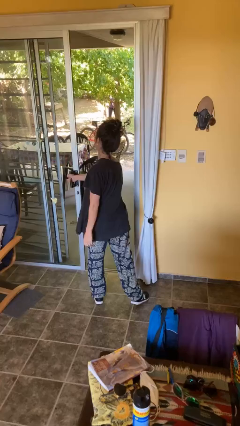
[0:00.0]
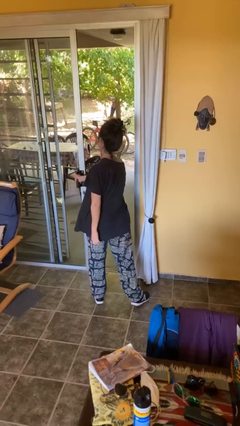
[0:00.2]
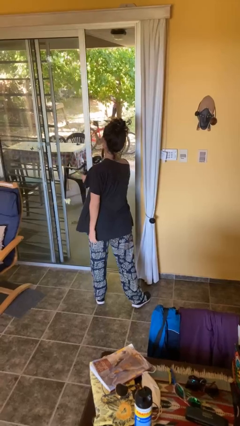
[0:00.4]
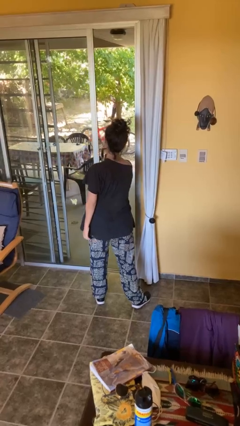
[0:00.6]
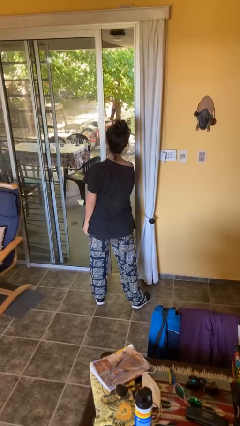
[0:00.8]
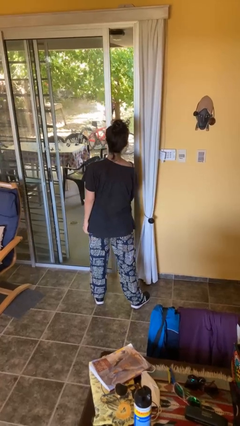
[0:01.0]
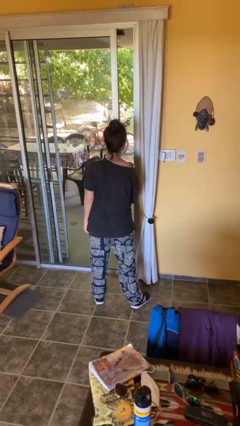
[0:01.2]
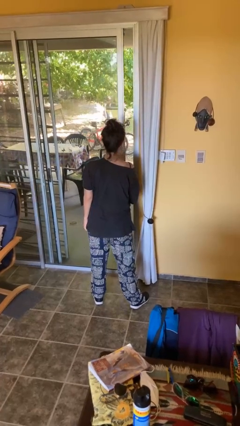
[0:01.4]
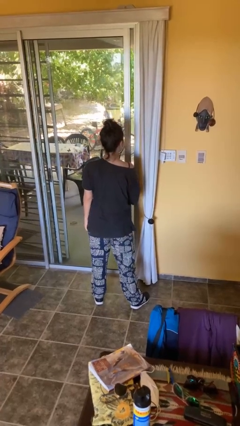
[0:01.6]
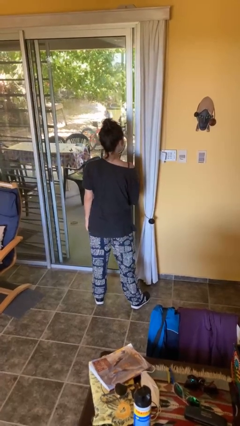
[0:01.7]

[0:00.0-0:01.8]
person closes facility door

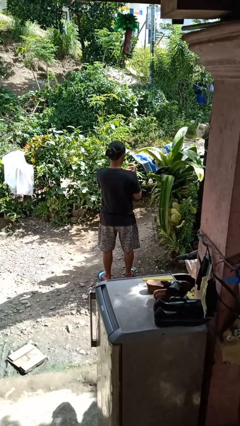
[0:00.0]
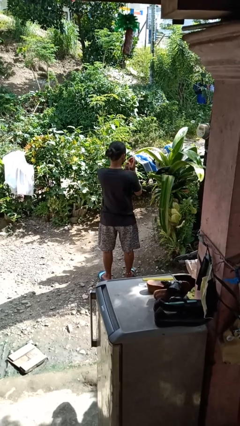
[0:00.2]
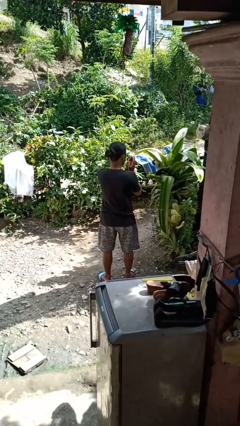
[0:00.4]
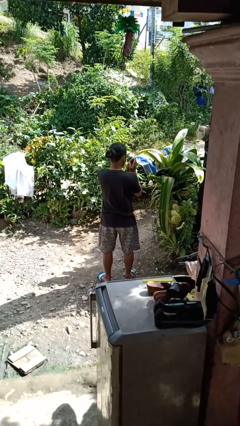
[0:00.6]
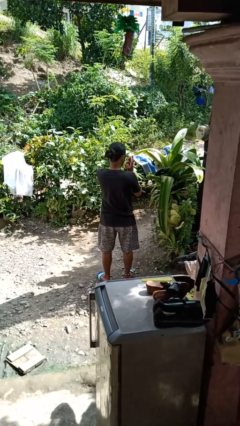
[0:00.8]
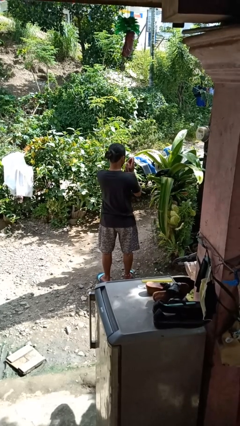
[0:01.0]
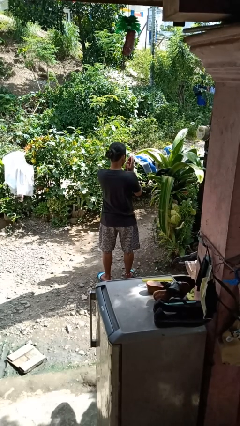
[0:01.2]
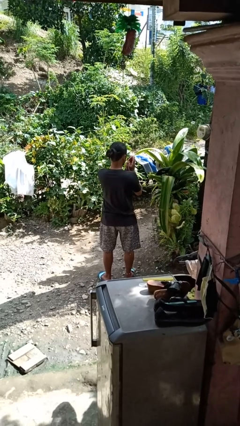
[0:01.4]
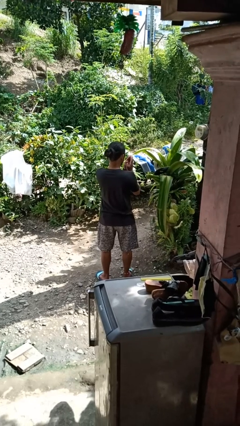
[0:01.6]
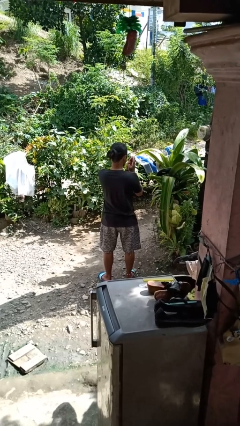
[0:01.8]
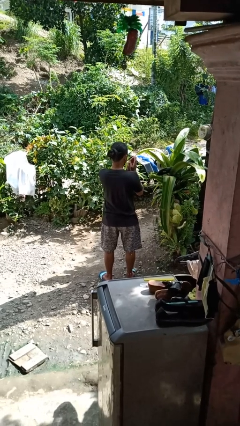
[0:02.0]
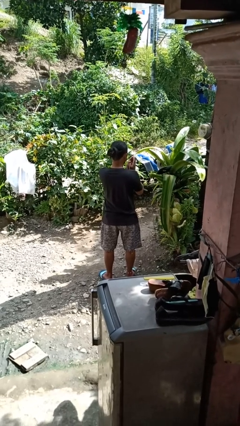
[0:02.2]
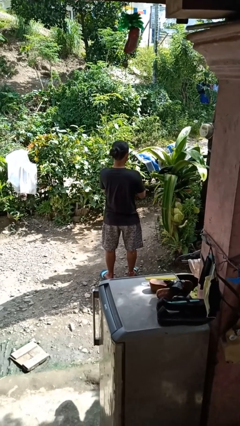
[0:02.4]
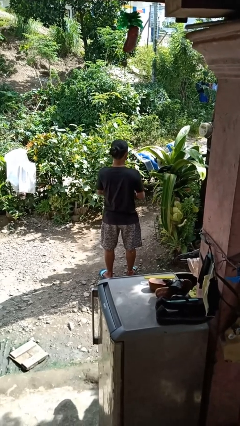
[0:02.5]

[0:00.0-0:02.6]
person blows into hands

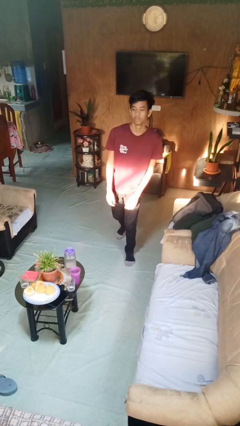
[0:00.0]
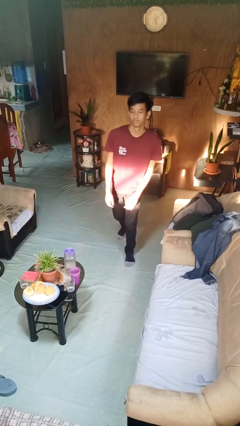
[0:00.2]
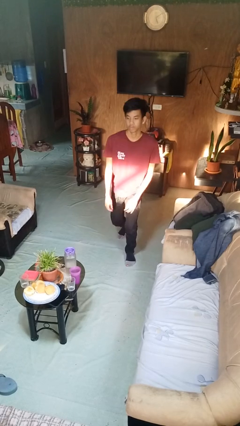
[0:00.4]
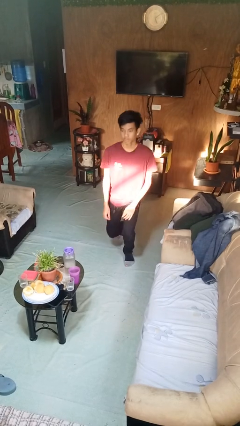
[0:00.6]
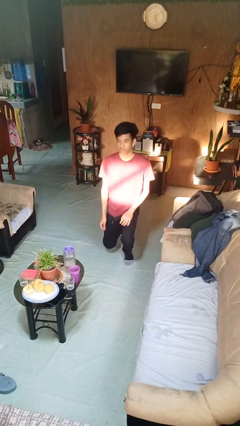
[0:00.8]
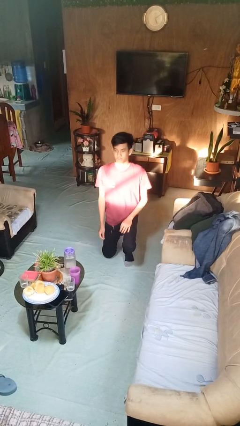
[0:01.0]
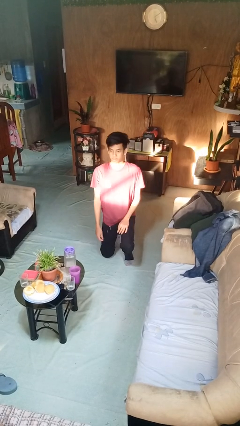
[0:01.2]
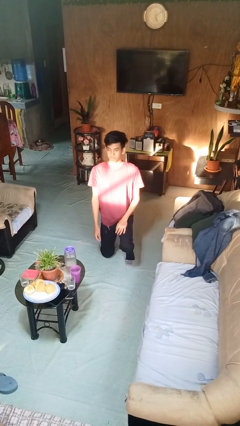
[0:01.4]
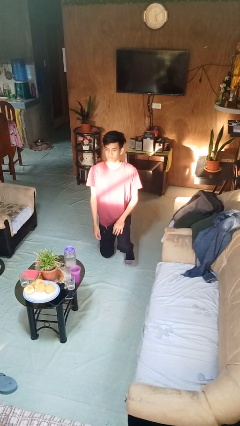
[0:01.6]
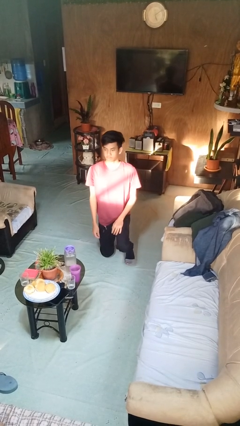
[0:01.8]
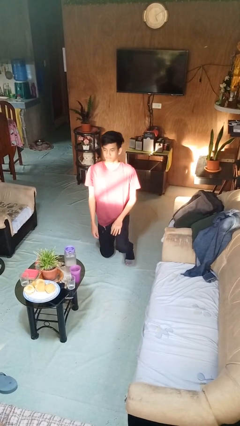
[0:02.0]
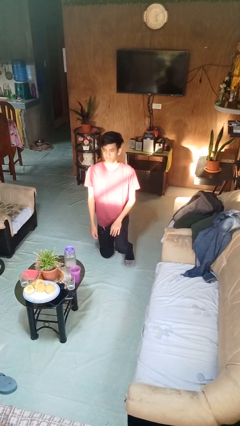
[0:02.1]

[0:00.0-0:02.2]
person kneels

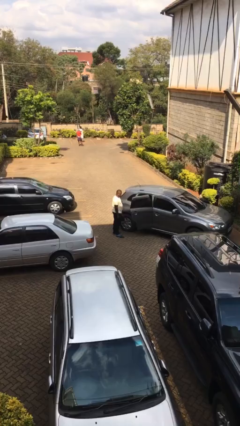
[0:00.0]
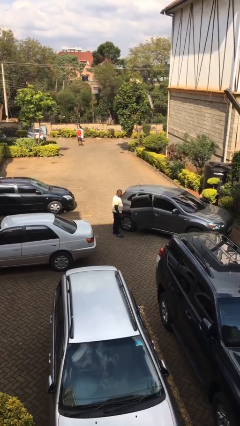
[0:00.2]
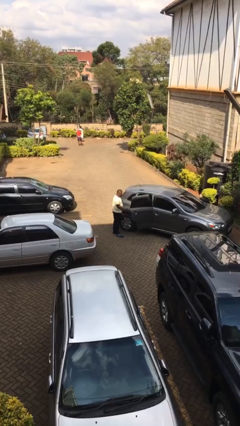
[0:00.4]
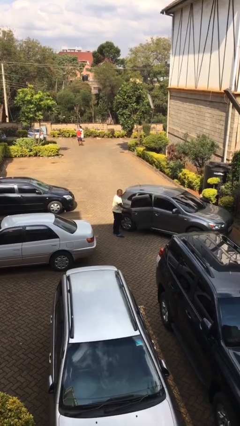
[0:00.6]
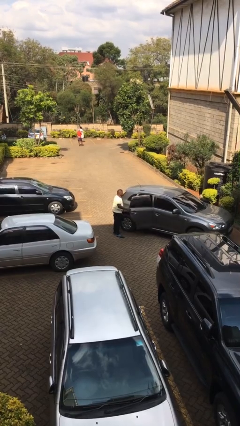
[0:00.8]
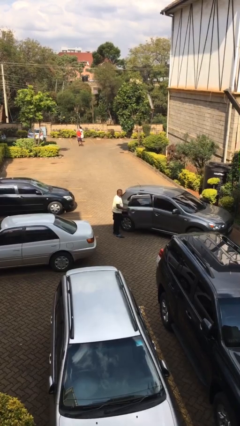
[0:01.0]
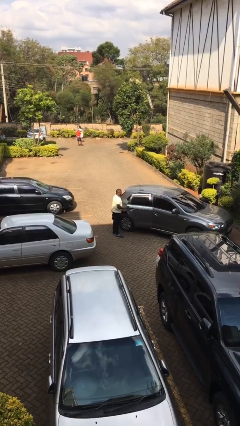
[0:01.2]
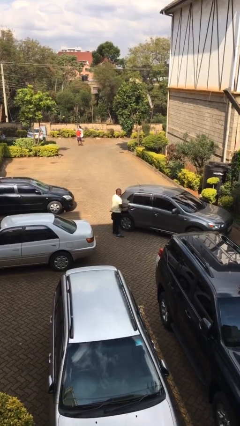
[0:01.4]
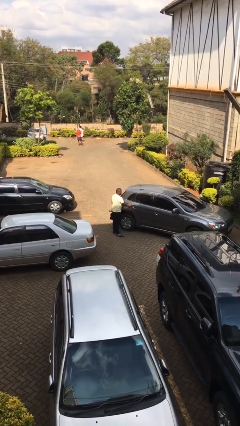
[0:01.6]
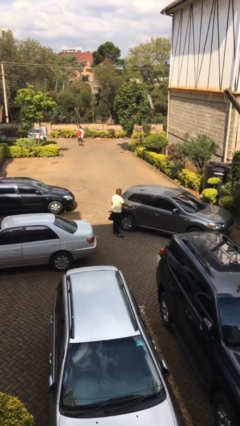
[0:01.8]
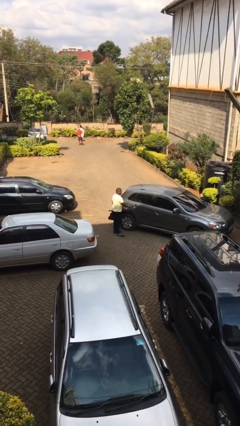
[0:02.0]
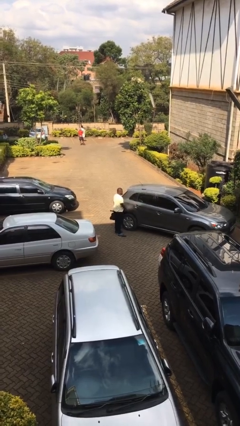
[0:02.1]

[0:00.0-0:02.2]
person closes car door

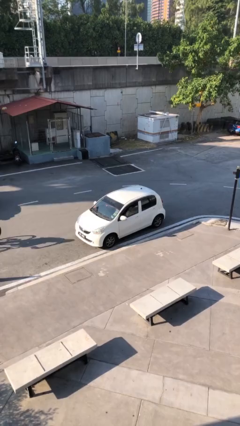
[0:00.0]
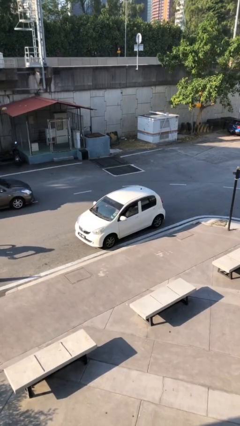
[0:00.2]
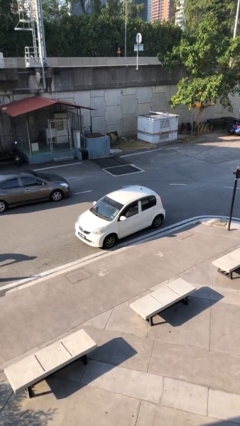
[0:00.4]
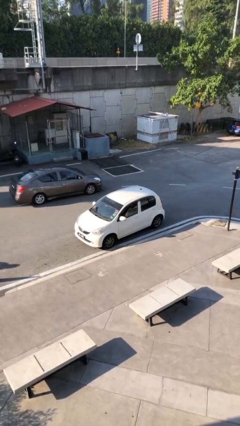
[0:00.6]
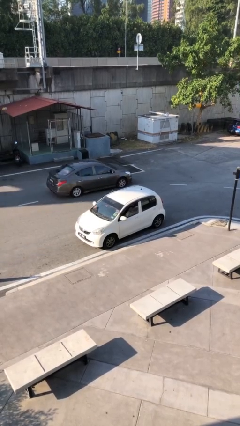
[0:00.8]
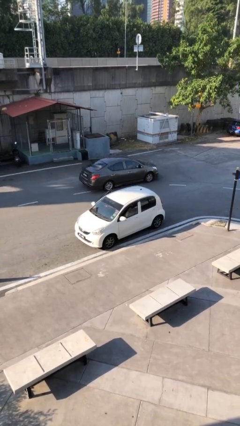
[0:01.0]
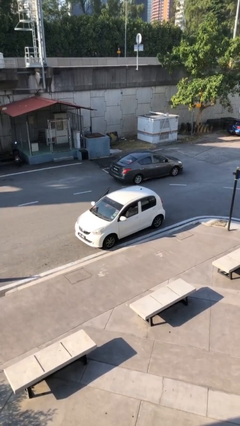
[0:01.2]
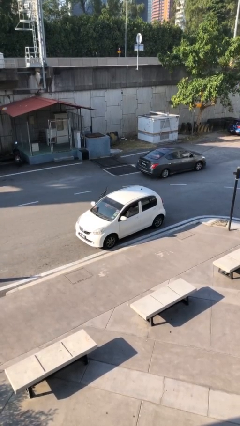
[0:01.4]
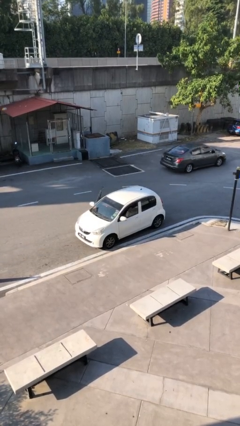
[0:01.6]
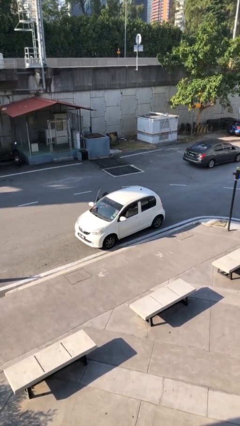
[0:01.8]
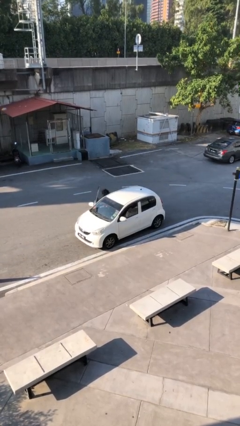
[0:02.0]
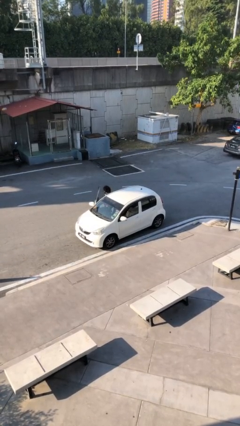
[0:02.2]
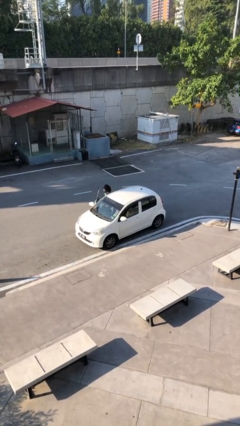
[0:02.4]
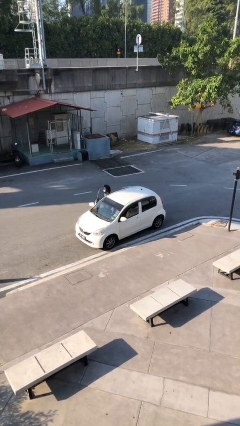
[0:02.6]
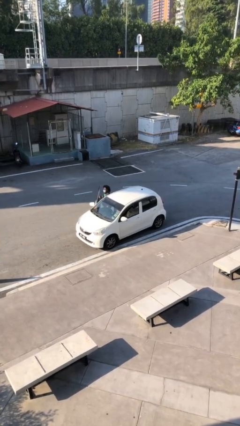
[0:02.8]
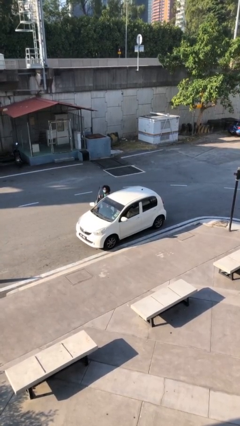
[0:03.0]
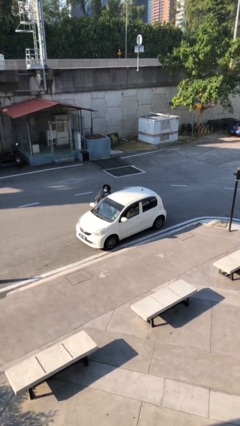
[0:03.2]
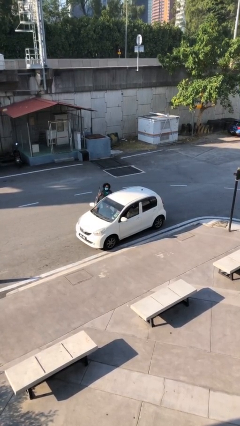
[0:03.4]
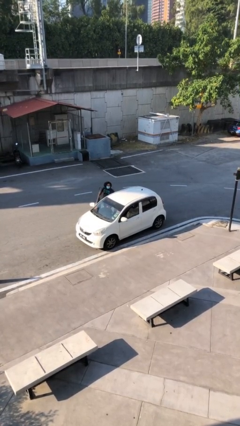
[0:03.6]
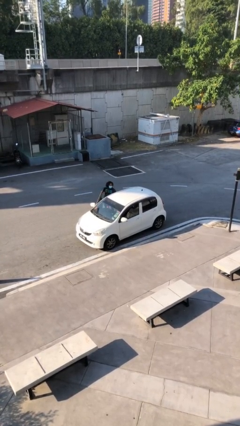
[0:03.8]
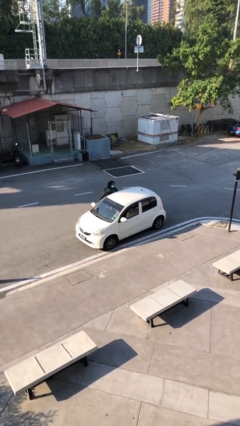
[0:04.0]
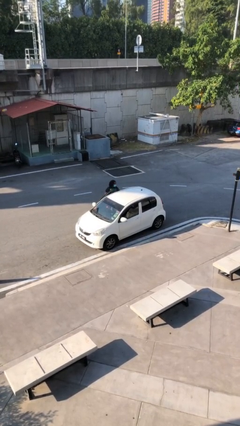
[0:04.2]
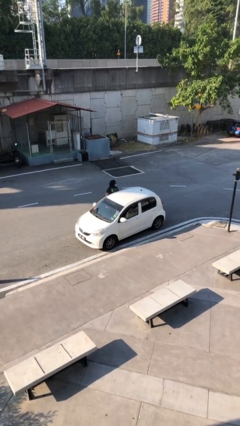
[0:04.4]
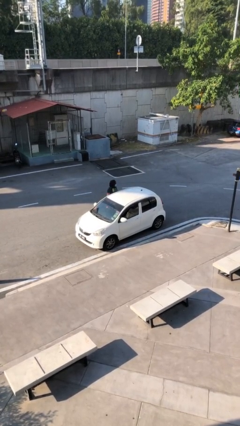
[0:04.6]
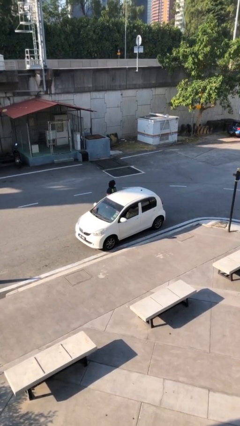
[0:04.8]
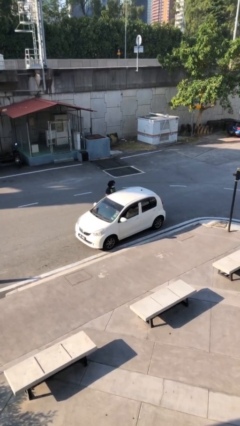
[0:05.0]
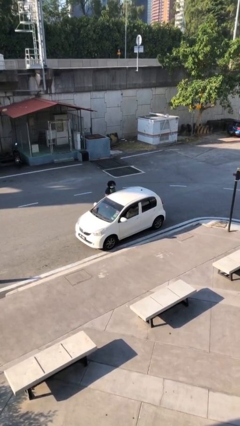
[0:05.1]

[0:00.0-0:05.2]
car drops off person

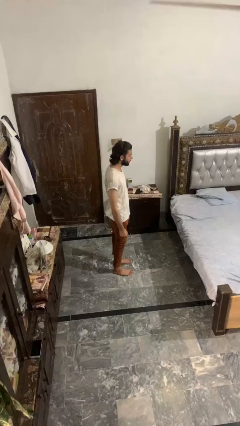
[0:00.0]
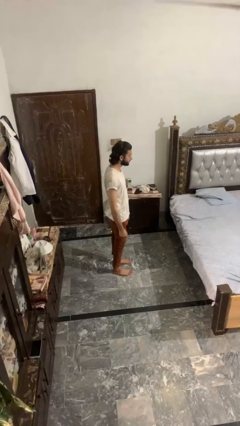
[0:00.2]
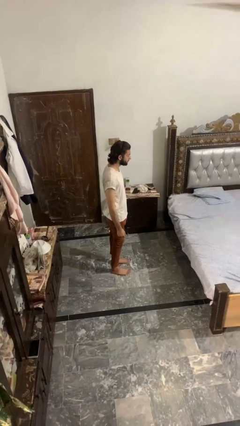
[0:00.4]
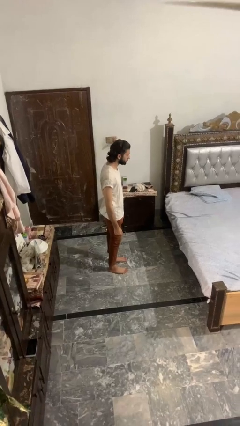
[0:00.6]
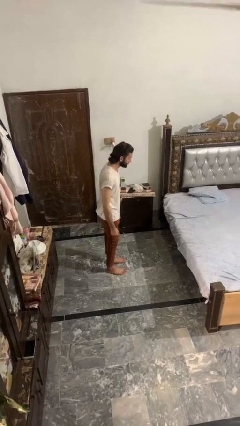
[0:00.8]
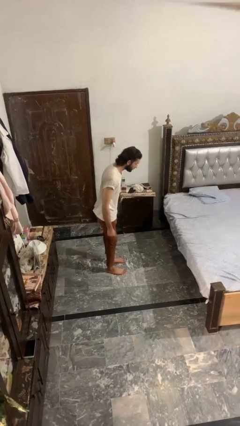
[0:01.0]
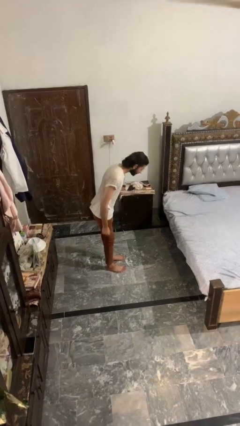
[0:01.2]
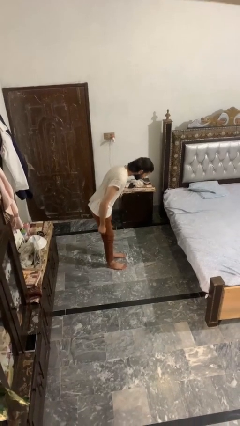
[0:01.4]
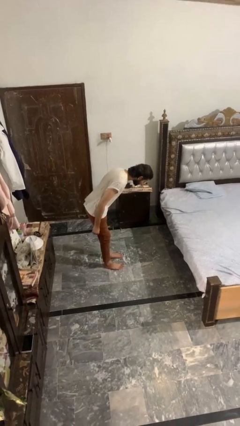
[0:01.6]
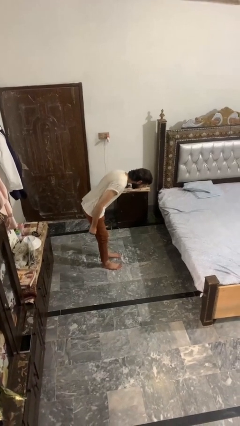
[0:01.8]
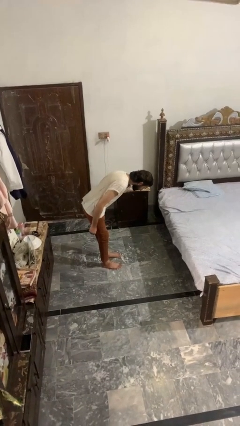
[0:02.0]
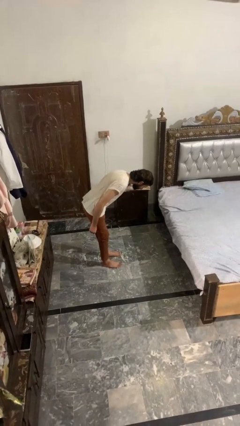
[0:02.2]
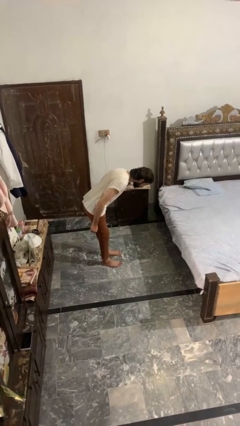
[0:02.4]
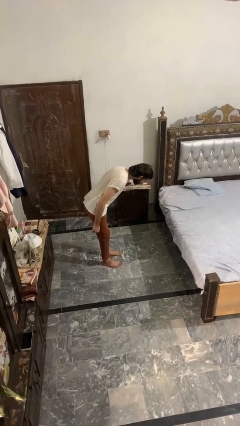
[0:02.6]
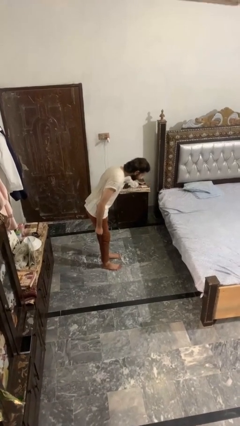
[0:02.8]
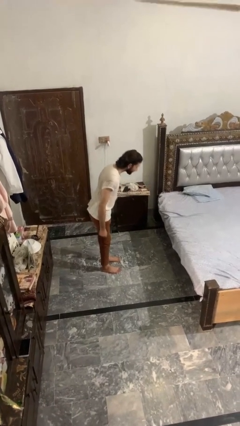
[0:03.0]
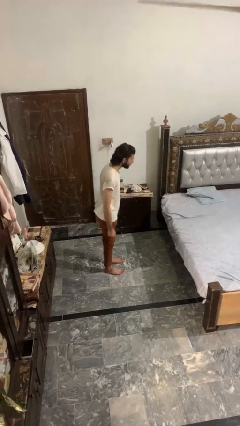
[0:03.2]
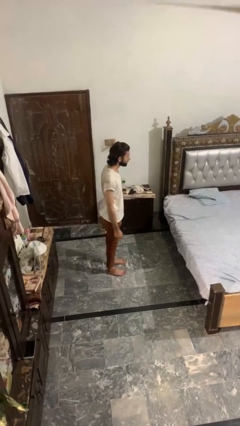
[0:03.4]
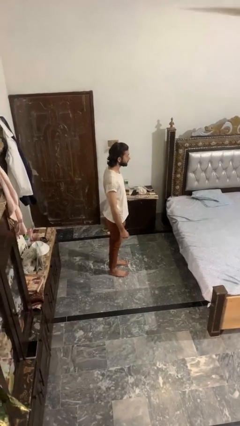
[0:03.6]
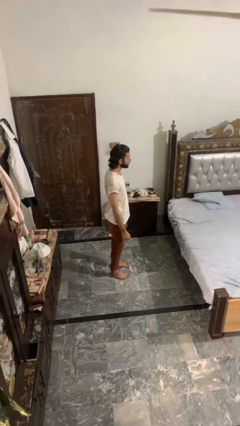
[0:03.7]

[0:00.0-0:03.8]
person bows
